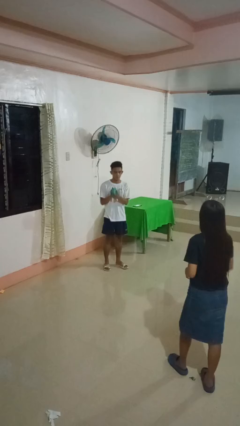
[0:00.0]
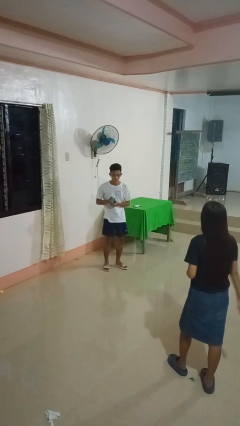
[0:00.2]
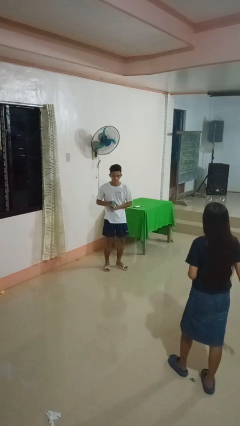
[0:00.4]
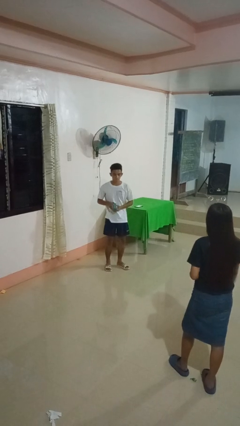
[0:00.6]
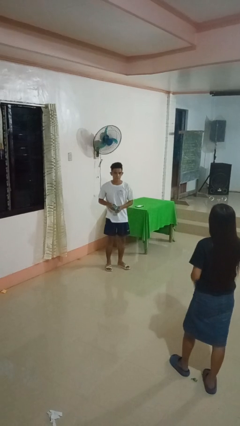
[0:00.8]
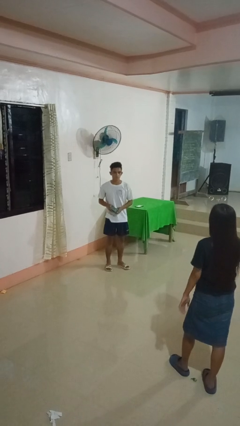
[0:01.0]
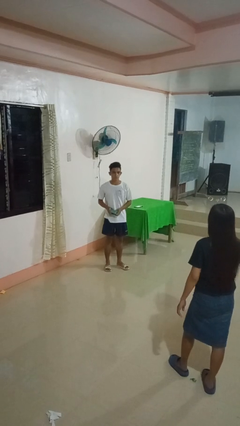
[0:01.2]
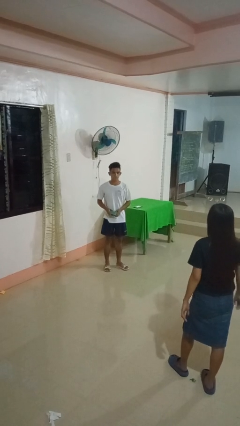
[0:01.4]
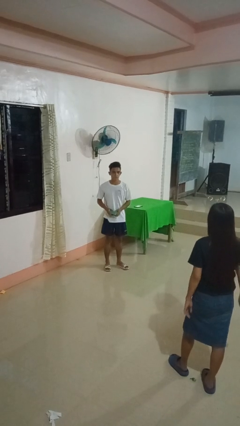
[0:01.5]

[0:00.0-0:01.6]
person catches object from person

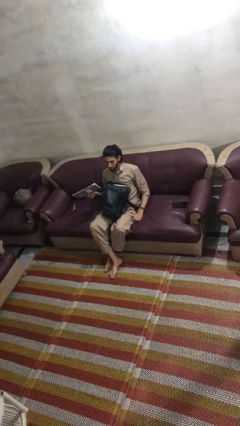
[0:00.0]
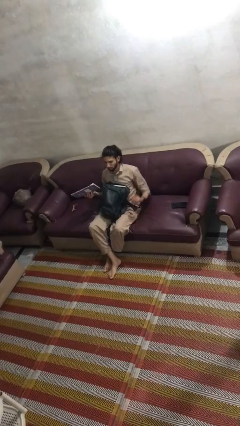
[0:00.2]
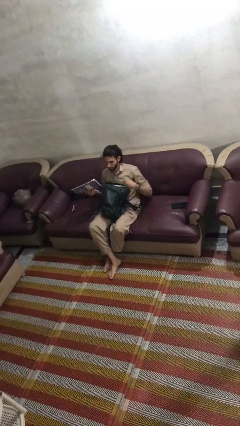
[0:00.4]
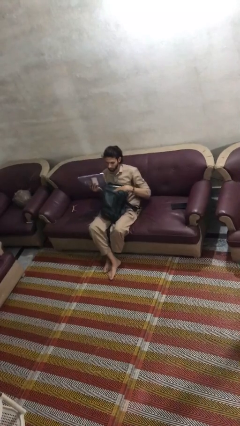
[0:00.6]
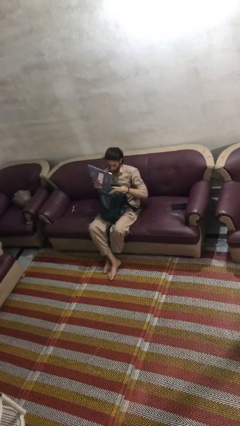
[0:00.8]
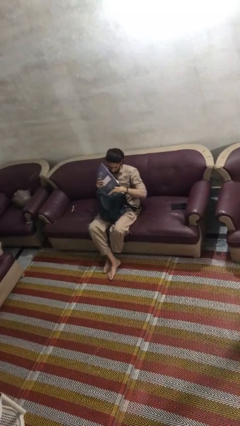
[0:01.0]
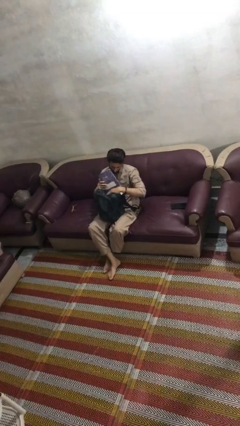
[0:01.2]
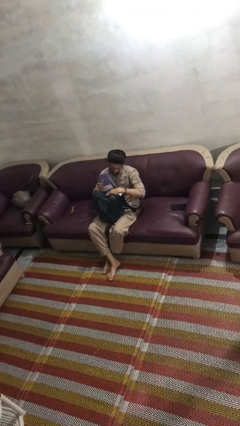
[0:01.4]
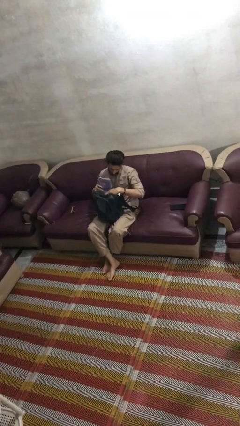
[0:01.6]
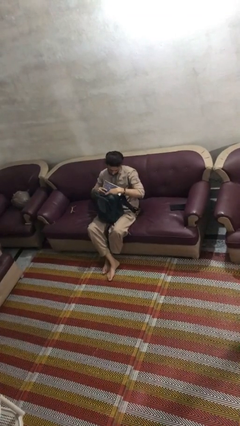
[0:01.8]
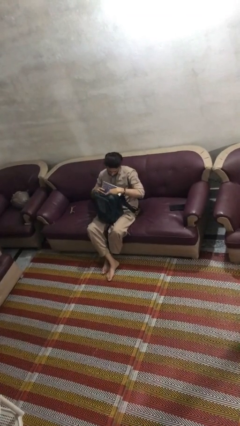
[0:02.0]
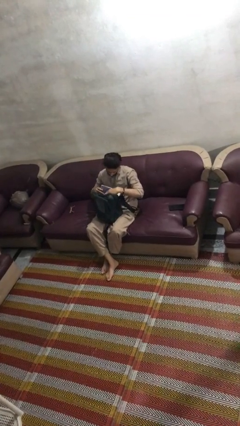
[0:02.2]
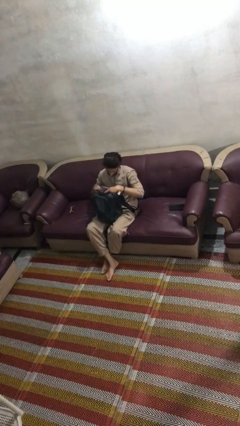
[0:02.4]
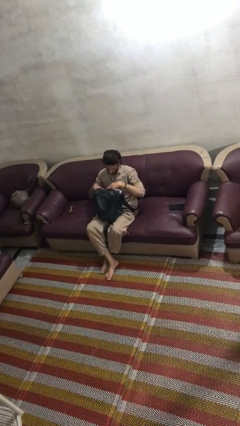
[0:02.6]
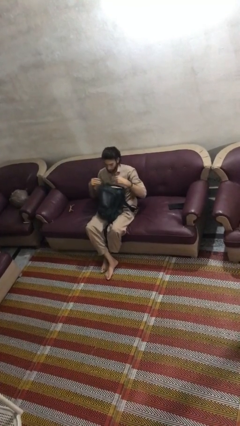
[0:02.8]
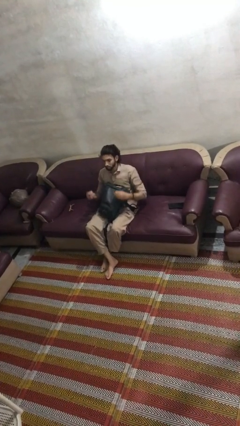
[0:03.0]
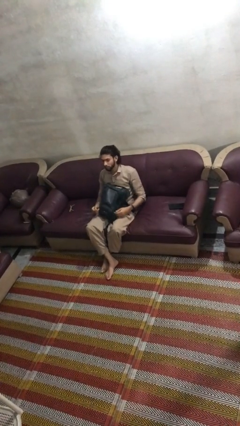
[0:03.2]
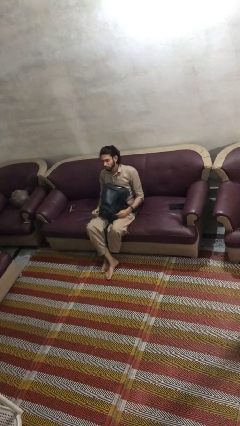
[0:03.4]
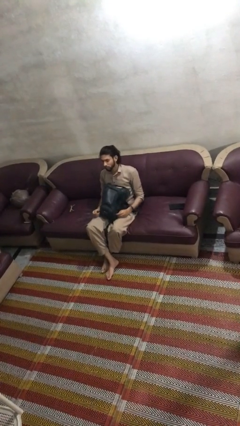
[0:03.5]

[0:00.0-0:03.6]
person puts object into backpack

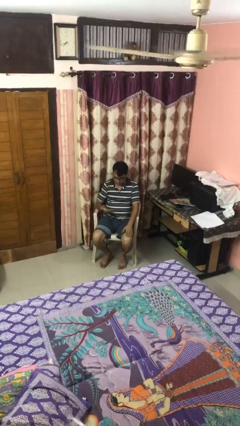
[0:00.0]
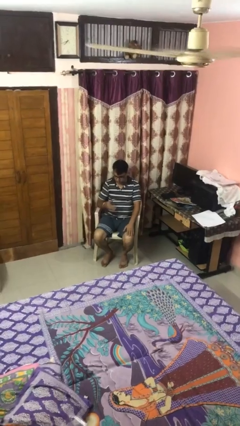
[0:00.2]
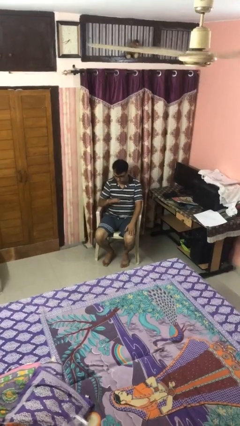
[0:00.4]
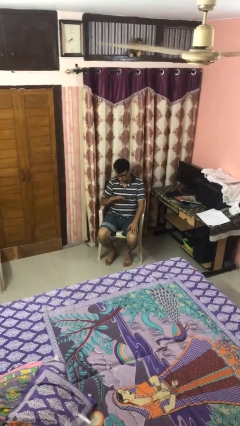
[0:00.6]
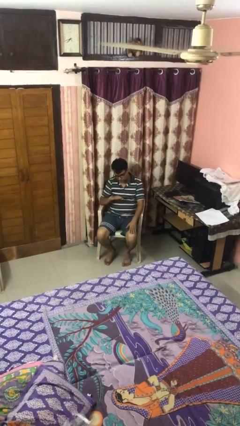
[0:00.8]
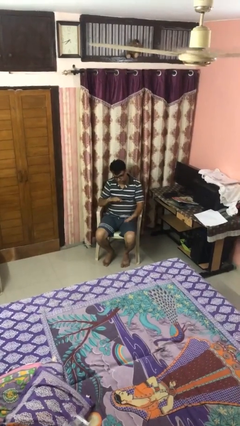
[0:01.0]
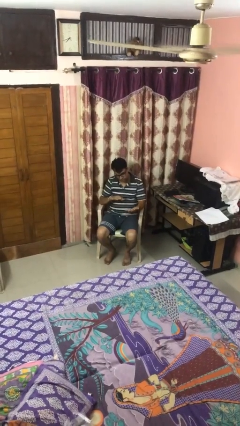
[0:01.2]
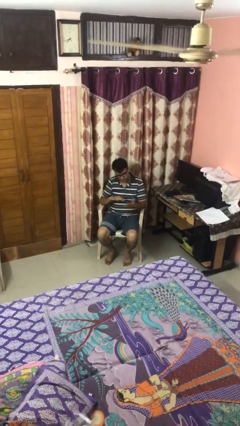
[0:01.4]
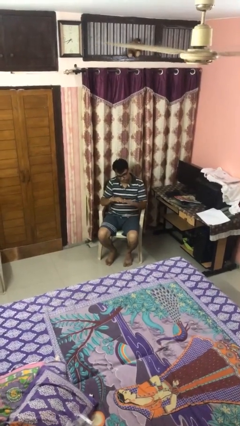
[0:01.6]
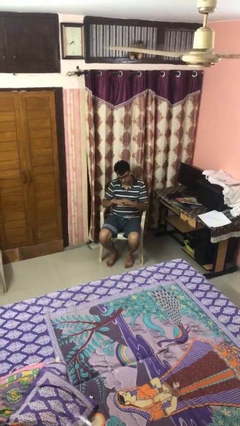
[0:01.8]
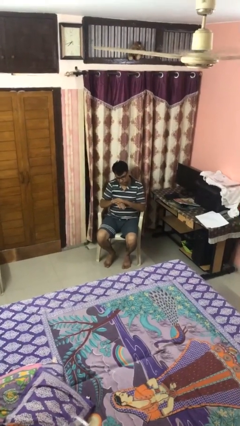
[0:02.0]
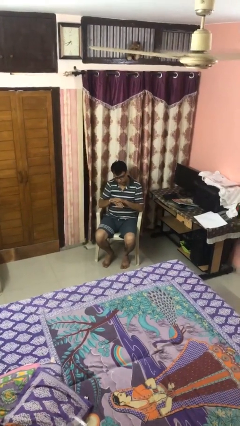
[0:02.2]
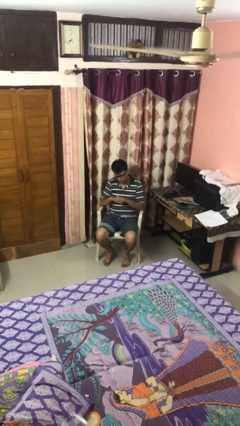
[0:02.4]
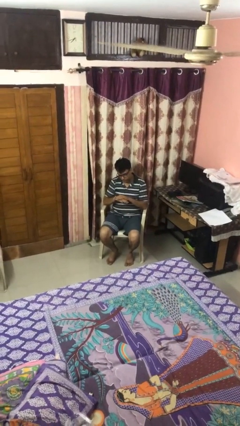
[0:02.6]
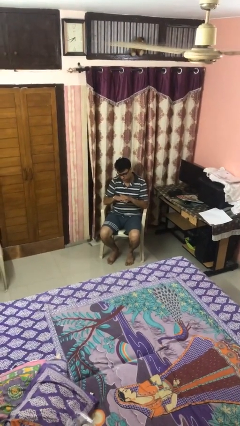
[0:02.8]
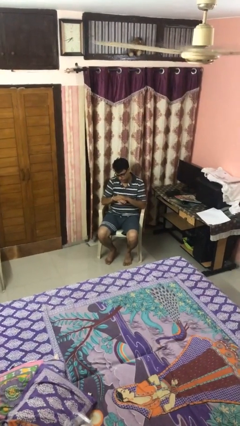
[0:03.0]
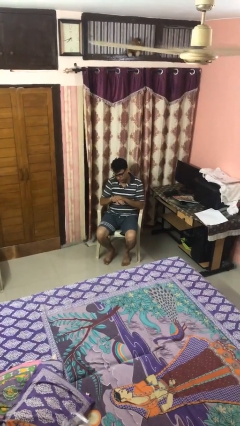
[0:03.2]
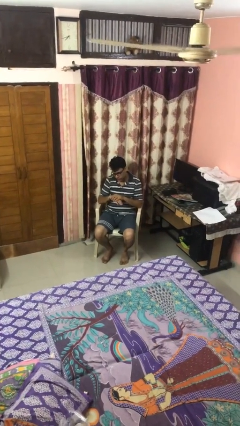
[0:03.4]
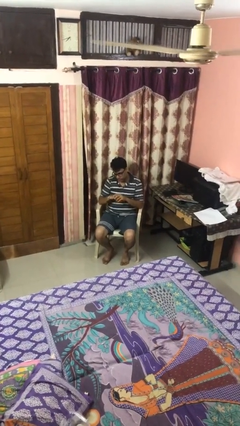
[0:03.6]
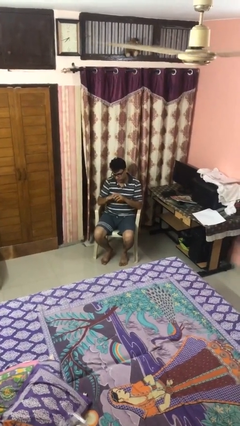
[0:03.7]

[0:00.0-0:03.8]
person looks at hands in lap

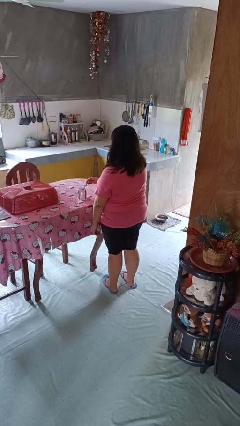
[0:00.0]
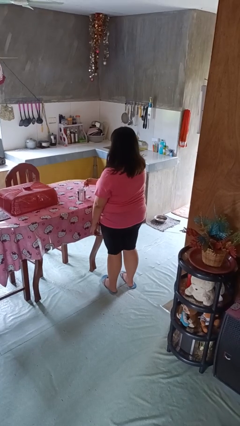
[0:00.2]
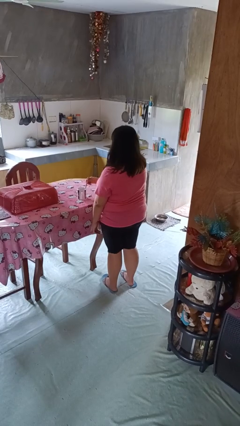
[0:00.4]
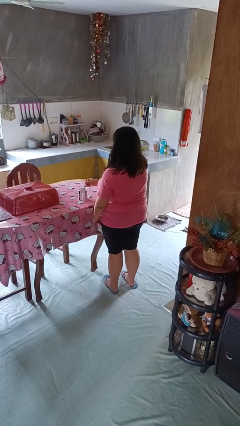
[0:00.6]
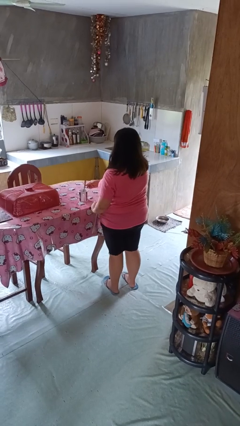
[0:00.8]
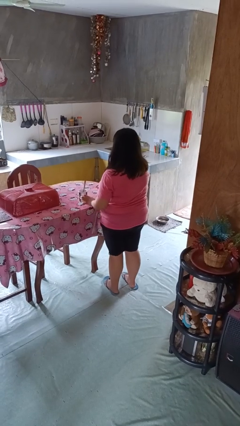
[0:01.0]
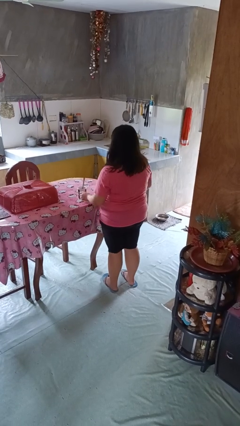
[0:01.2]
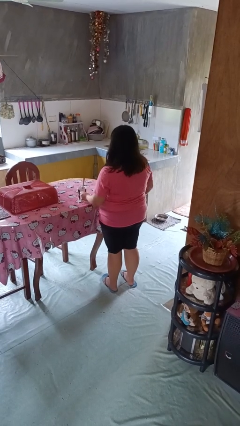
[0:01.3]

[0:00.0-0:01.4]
person stirs mug

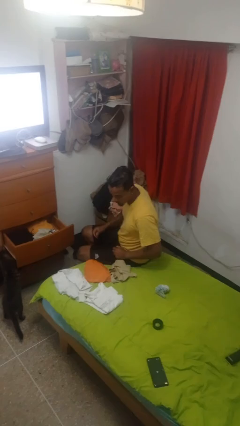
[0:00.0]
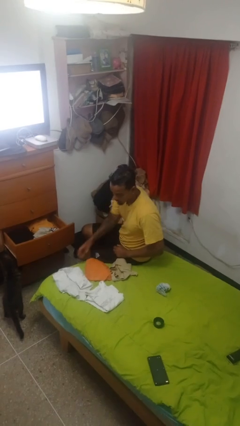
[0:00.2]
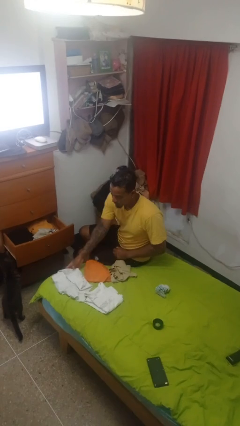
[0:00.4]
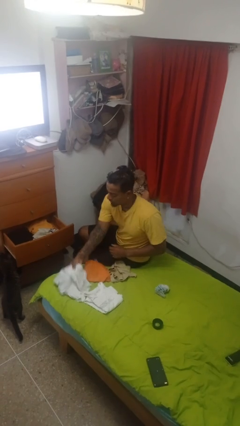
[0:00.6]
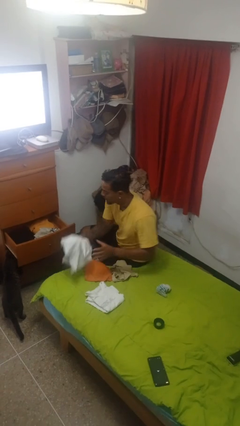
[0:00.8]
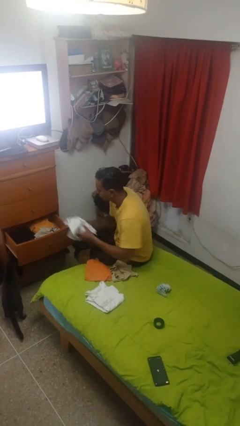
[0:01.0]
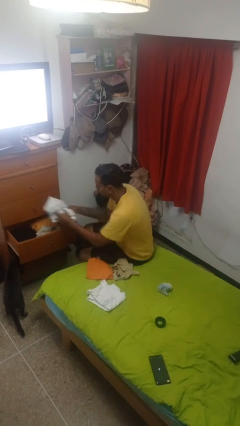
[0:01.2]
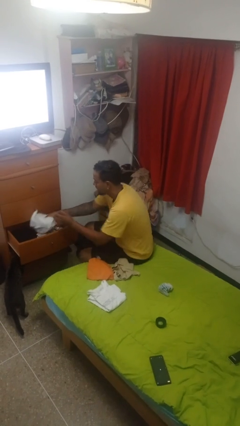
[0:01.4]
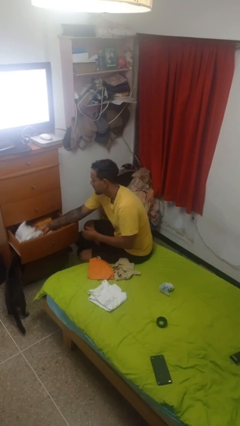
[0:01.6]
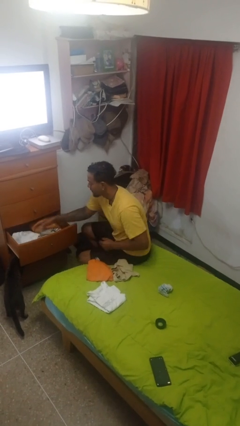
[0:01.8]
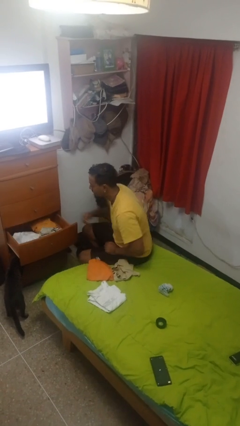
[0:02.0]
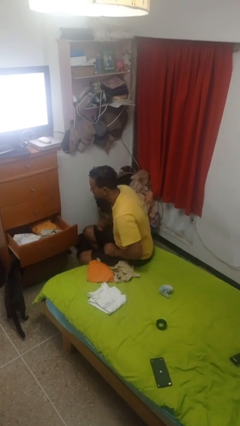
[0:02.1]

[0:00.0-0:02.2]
person puts clothes into dresser

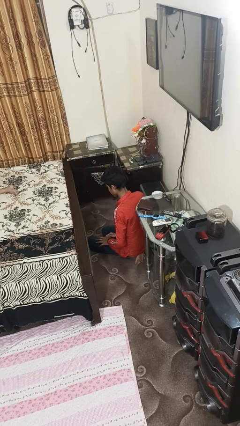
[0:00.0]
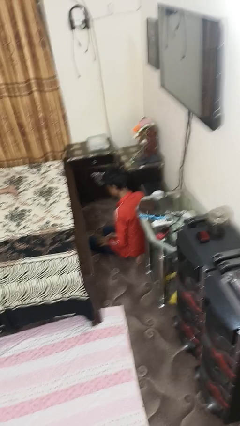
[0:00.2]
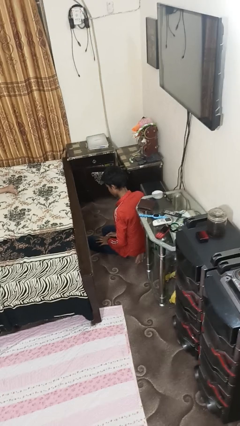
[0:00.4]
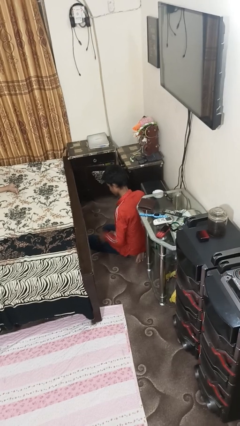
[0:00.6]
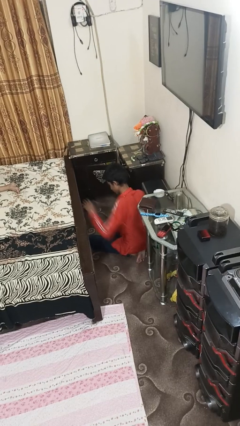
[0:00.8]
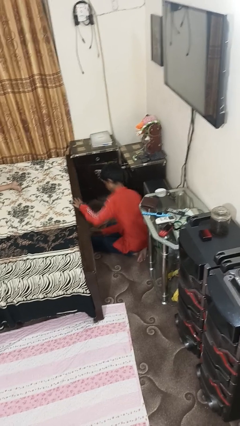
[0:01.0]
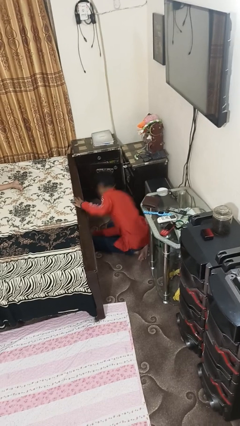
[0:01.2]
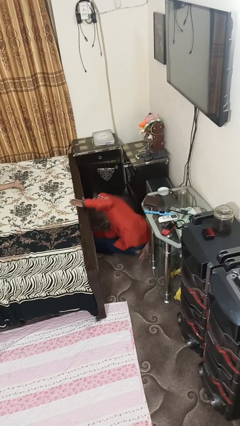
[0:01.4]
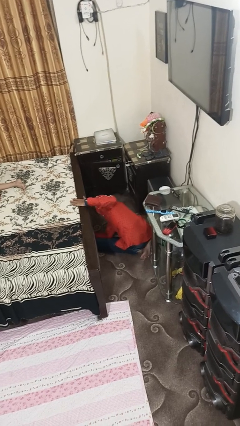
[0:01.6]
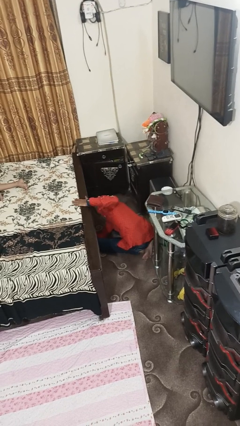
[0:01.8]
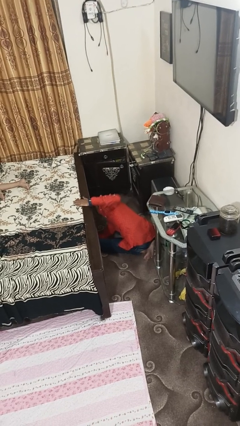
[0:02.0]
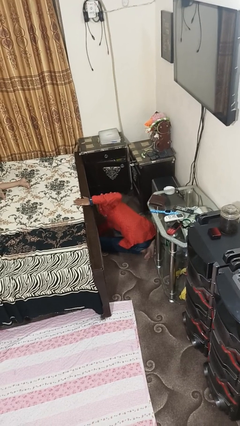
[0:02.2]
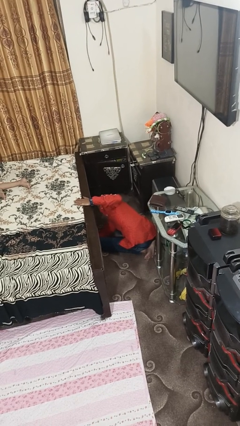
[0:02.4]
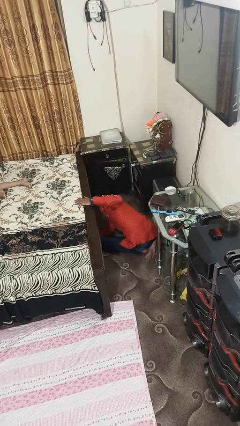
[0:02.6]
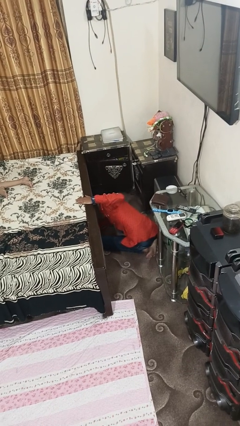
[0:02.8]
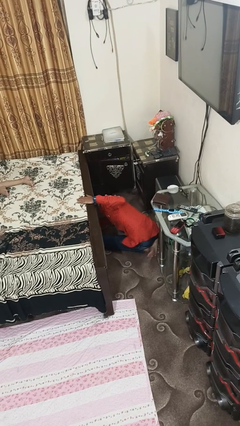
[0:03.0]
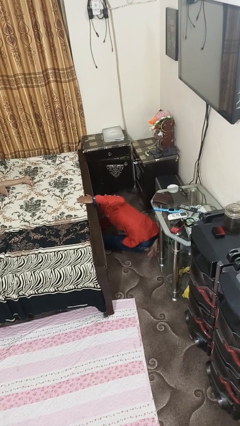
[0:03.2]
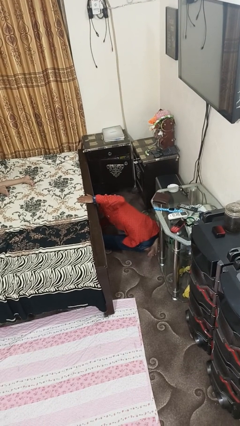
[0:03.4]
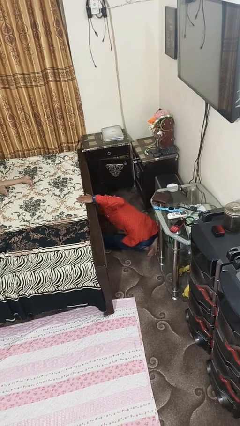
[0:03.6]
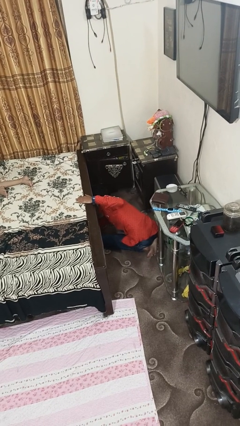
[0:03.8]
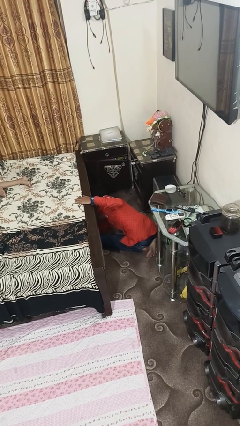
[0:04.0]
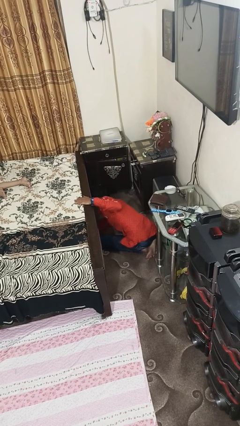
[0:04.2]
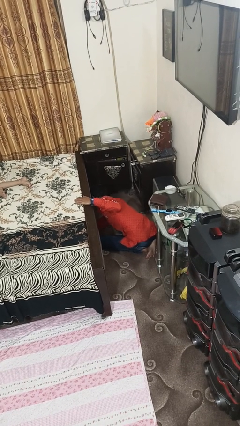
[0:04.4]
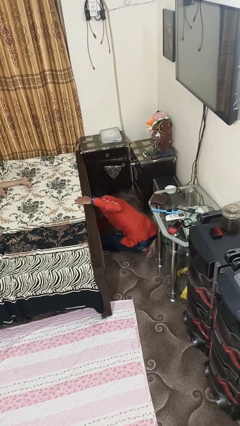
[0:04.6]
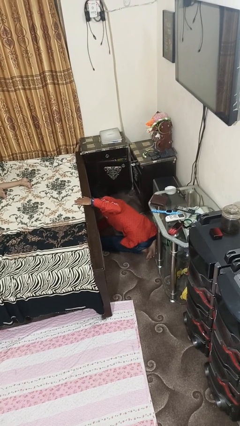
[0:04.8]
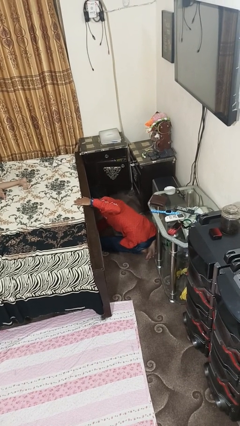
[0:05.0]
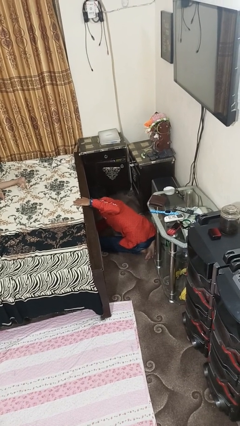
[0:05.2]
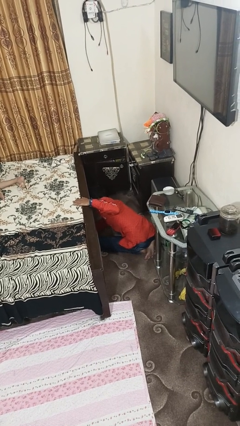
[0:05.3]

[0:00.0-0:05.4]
person searches under bed
